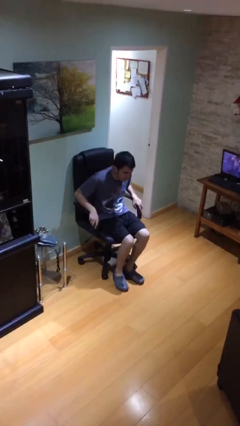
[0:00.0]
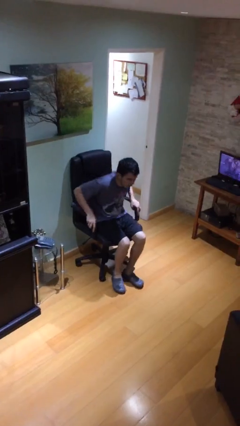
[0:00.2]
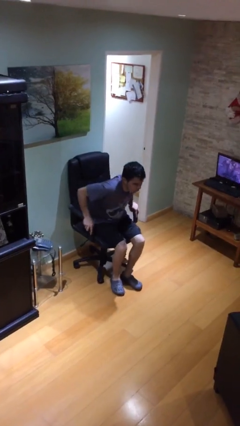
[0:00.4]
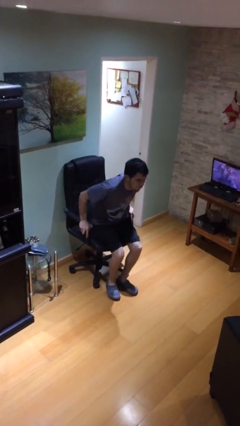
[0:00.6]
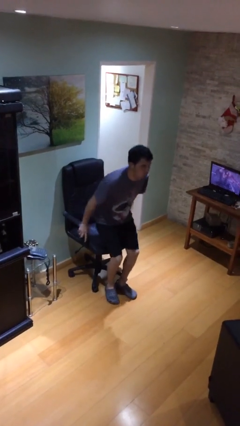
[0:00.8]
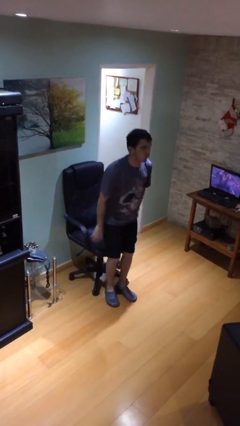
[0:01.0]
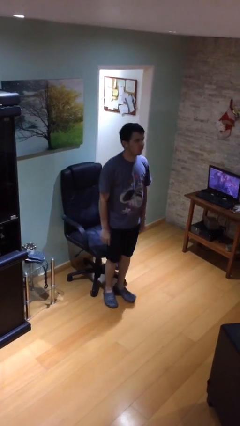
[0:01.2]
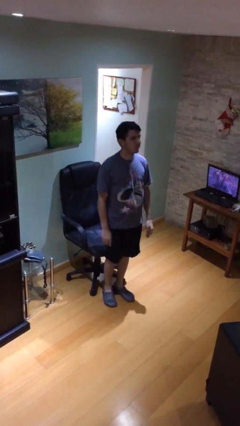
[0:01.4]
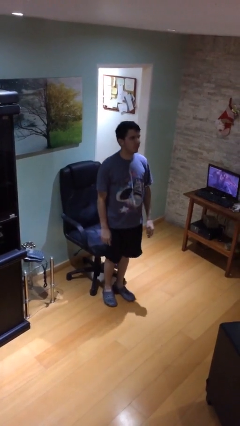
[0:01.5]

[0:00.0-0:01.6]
person stands up

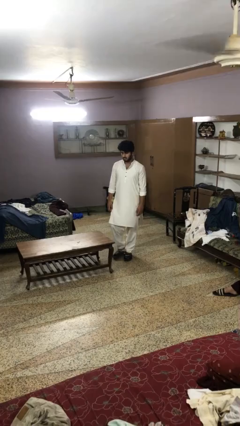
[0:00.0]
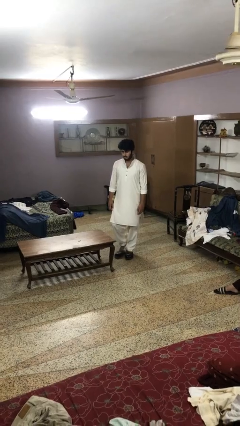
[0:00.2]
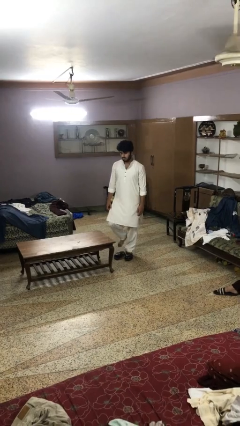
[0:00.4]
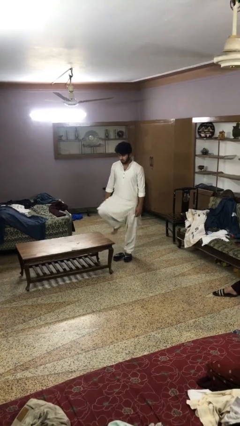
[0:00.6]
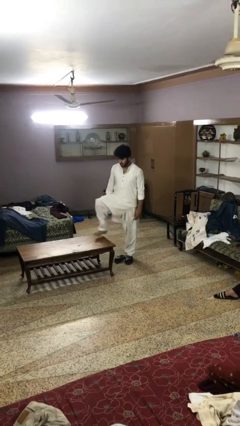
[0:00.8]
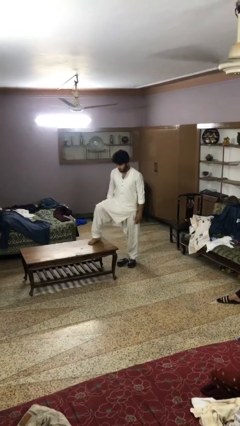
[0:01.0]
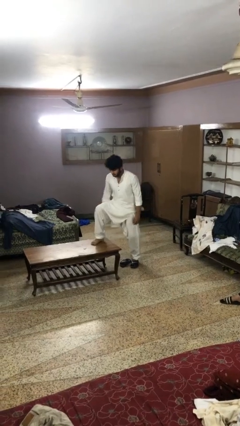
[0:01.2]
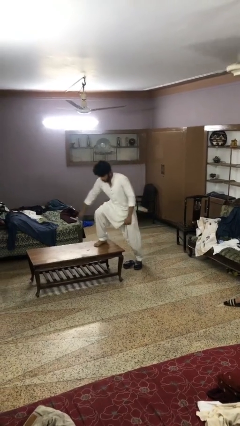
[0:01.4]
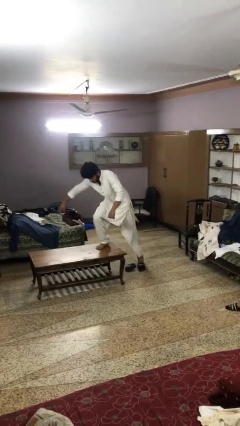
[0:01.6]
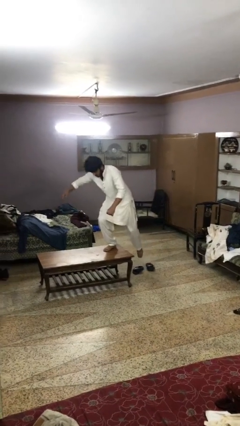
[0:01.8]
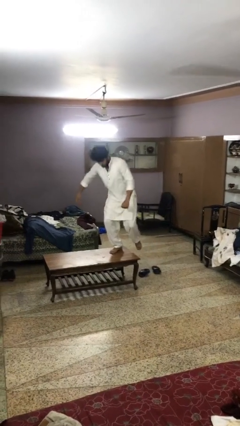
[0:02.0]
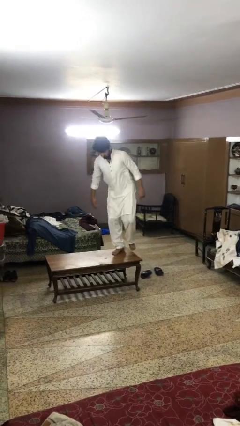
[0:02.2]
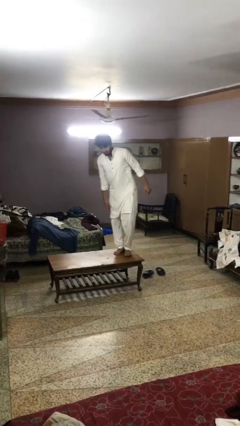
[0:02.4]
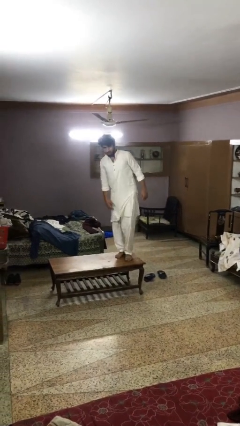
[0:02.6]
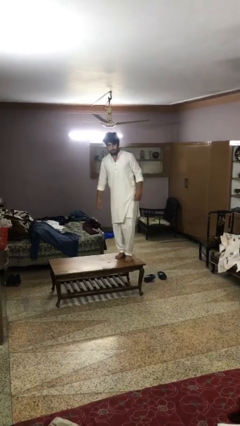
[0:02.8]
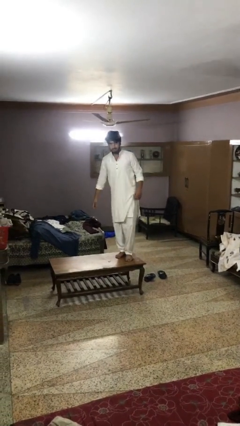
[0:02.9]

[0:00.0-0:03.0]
person climbs on table

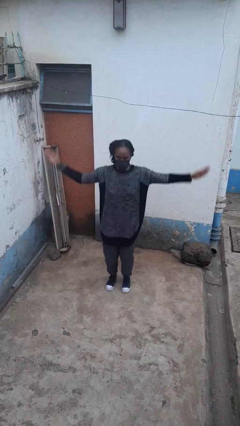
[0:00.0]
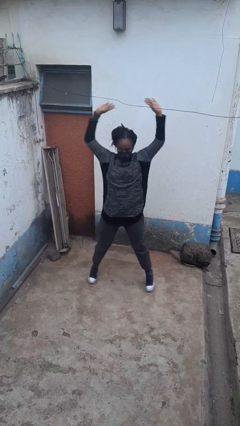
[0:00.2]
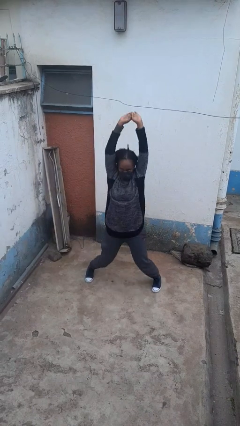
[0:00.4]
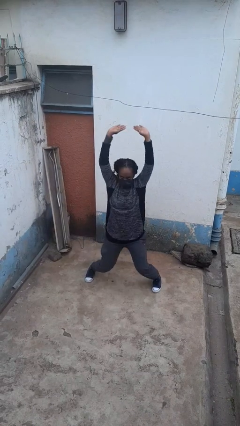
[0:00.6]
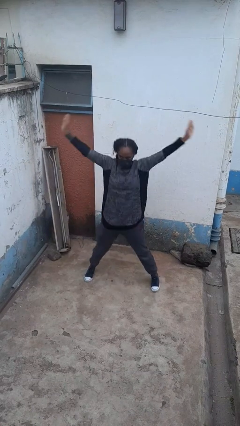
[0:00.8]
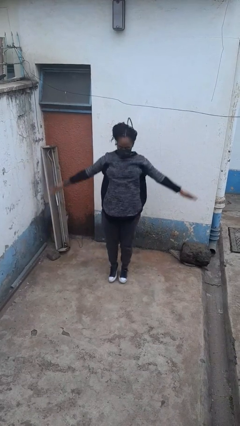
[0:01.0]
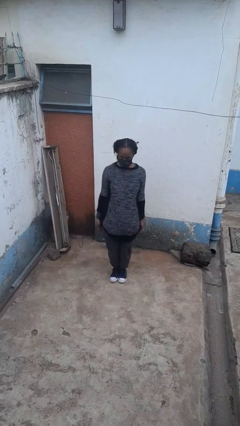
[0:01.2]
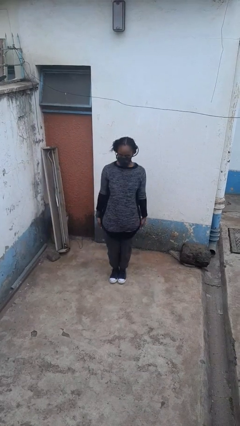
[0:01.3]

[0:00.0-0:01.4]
person exercises with jumping jacks

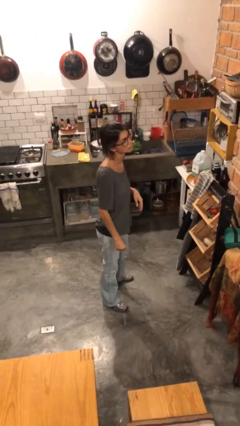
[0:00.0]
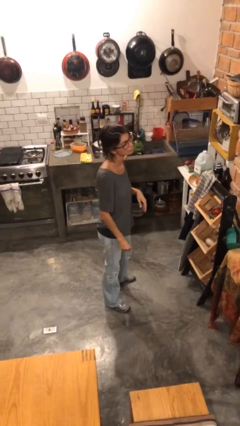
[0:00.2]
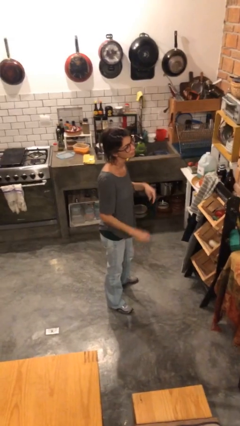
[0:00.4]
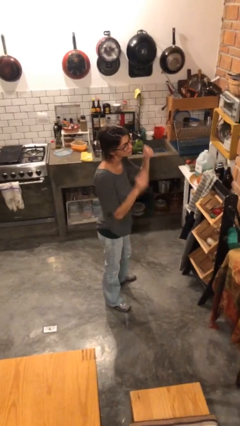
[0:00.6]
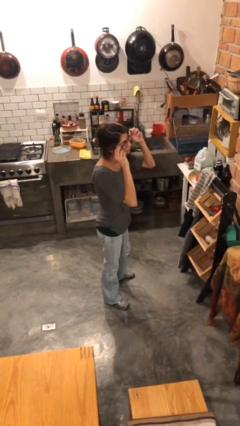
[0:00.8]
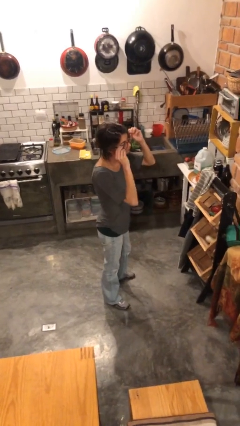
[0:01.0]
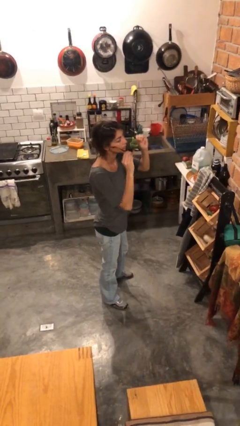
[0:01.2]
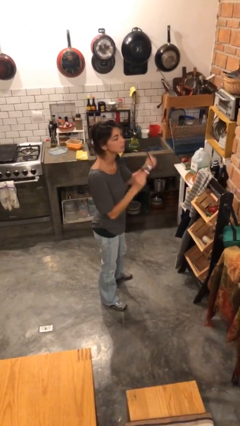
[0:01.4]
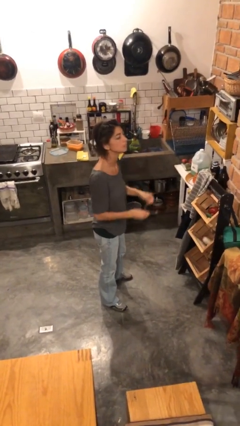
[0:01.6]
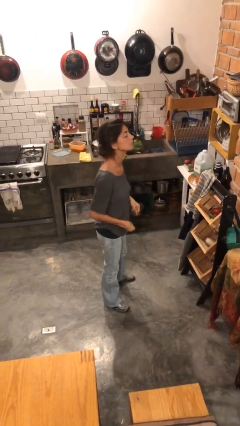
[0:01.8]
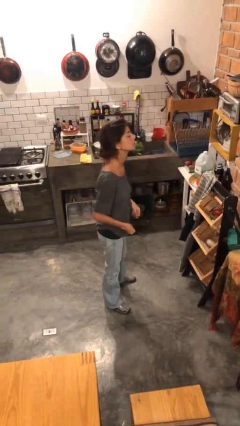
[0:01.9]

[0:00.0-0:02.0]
person takes off glasses

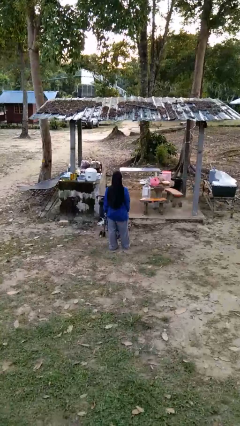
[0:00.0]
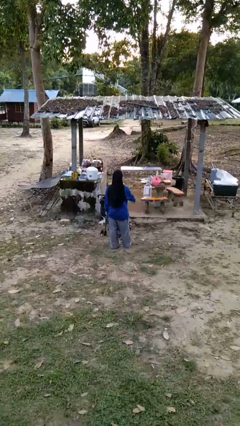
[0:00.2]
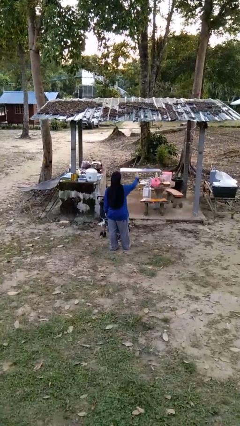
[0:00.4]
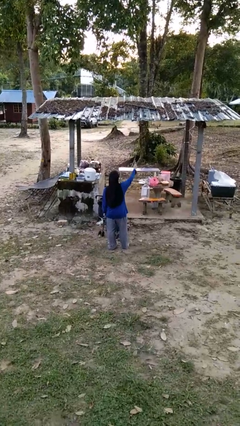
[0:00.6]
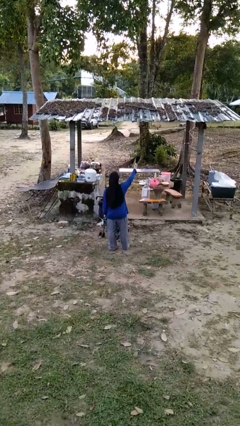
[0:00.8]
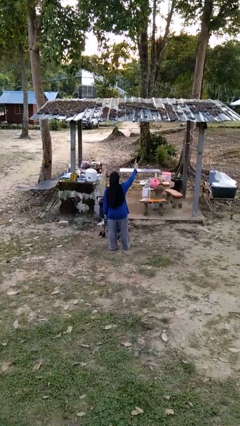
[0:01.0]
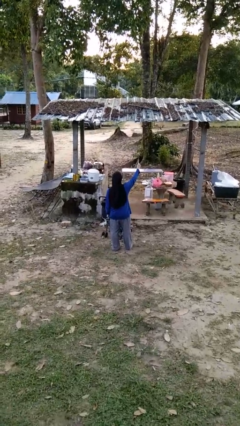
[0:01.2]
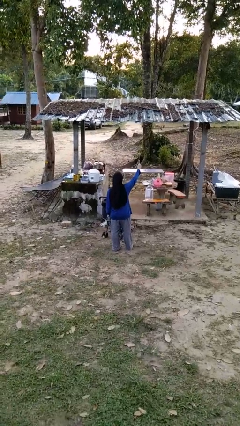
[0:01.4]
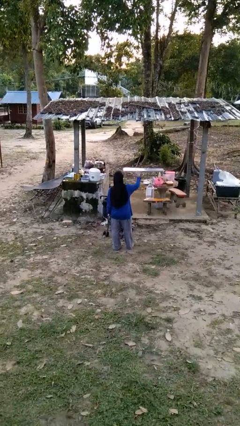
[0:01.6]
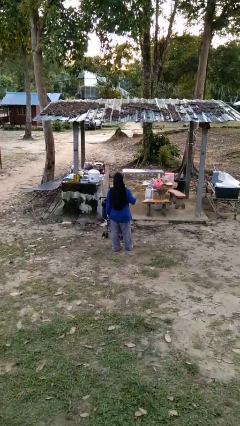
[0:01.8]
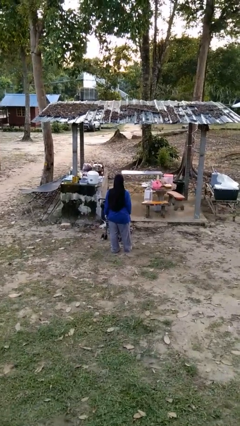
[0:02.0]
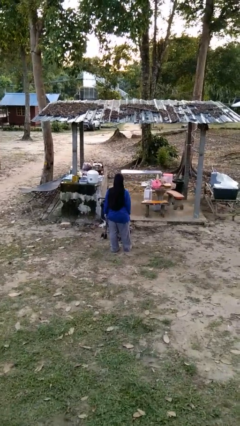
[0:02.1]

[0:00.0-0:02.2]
person gestures number one

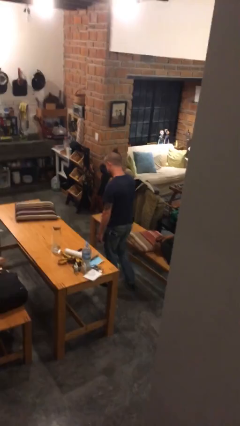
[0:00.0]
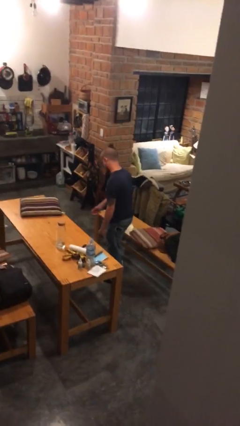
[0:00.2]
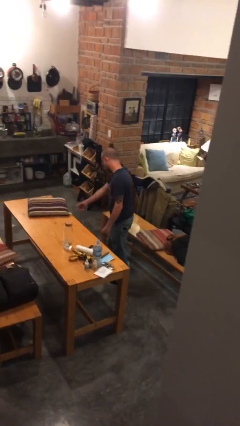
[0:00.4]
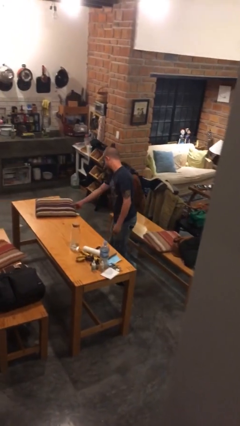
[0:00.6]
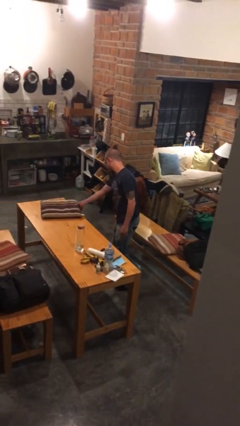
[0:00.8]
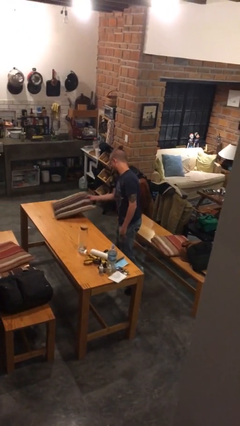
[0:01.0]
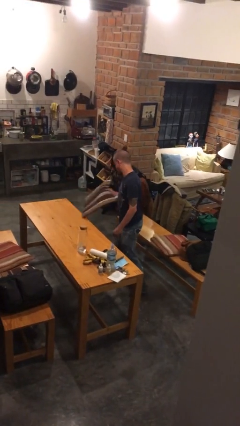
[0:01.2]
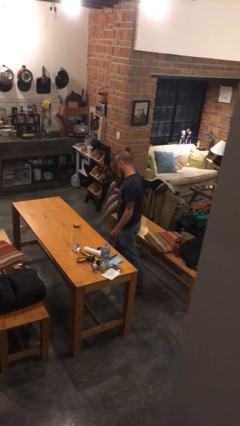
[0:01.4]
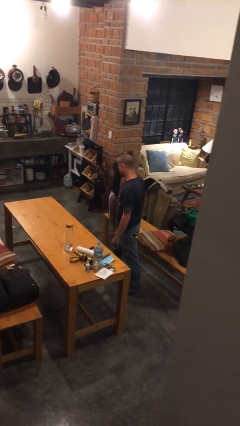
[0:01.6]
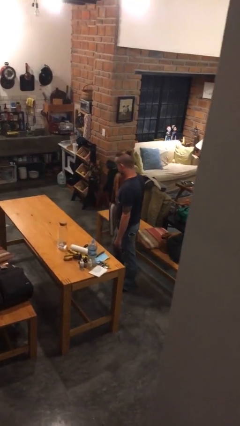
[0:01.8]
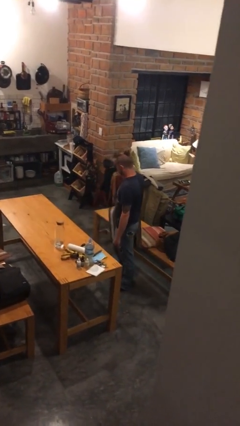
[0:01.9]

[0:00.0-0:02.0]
person picks up object from table

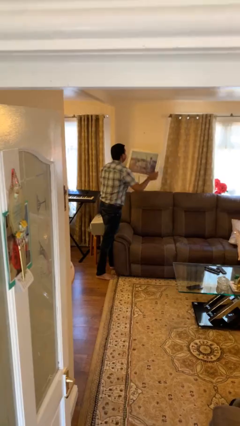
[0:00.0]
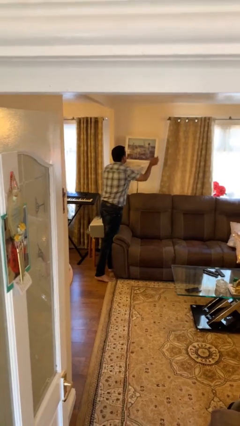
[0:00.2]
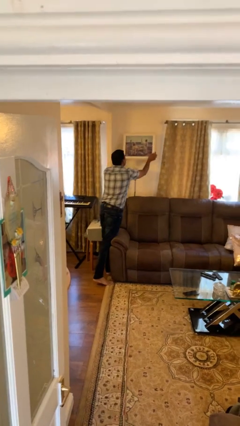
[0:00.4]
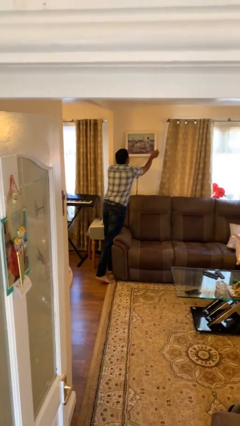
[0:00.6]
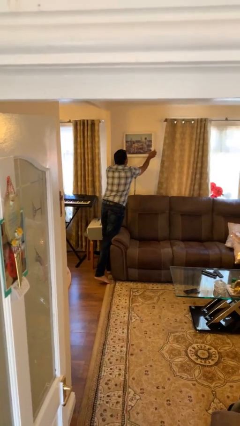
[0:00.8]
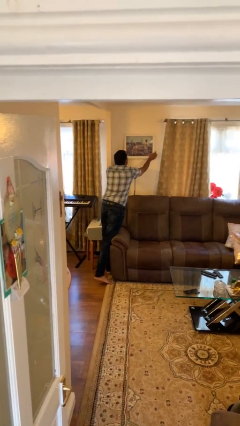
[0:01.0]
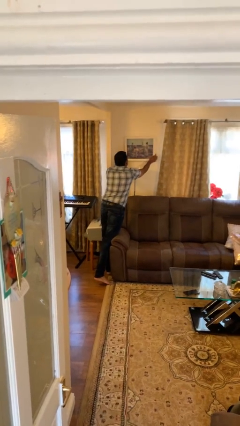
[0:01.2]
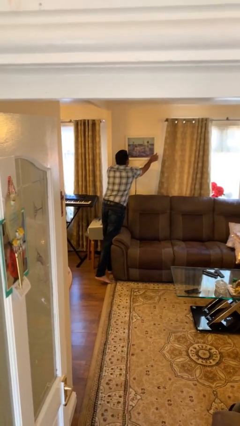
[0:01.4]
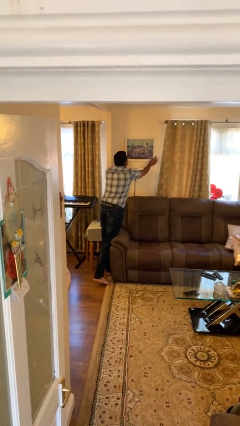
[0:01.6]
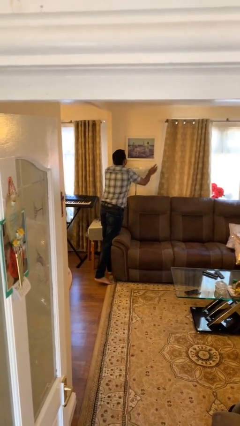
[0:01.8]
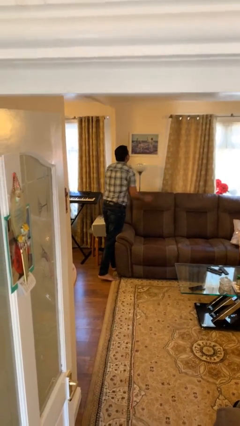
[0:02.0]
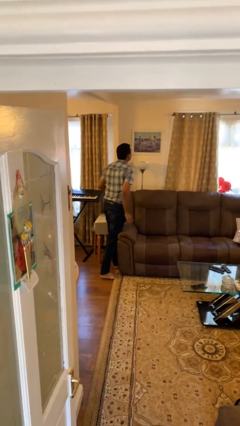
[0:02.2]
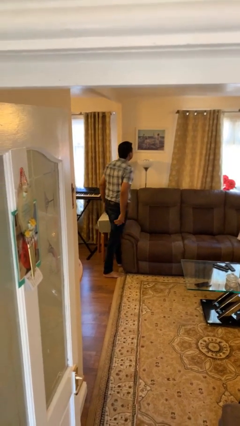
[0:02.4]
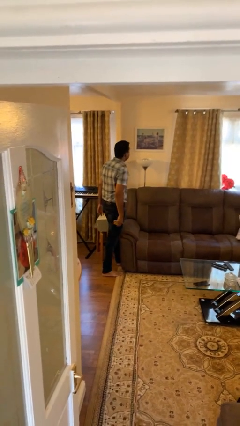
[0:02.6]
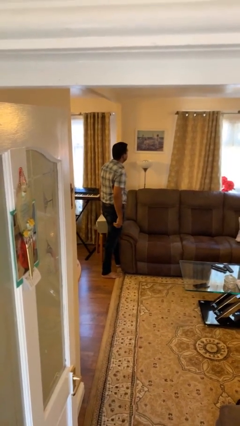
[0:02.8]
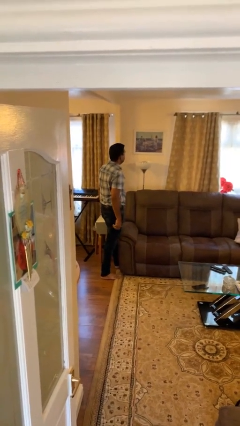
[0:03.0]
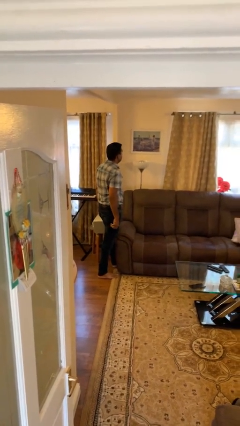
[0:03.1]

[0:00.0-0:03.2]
person puts up picture frame

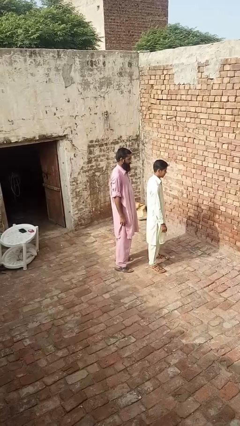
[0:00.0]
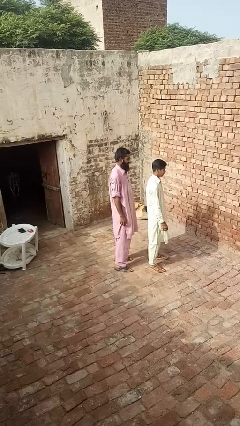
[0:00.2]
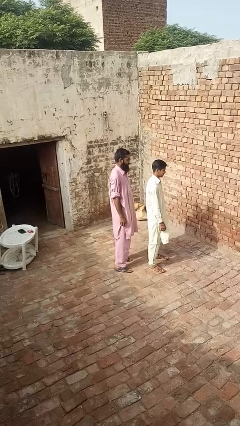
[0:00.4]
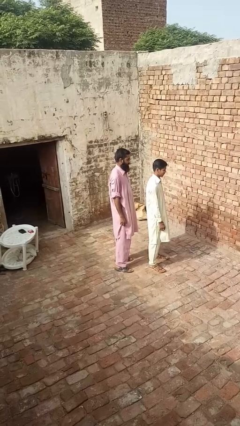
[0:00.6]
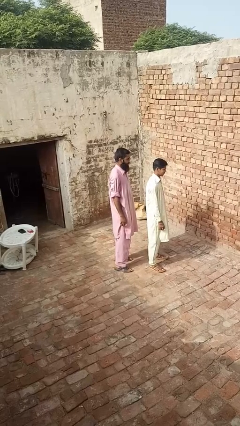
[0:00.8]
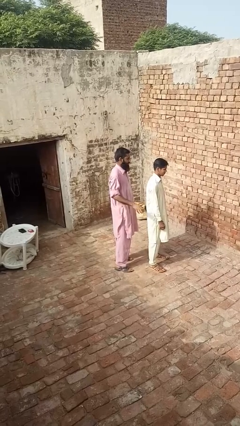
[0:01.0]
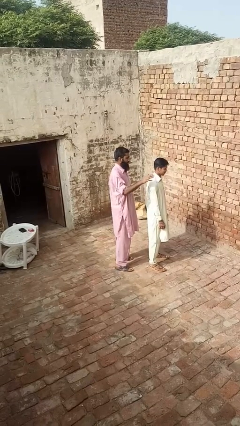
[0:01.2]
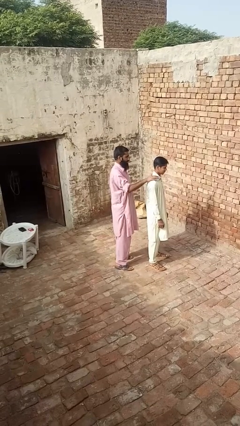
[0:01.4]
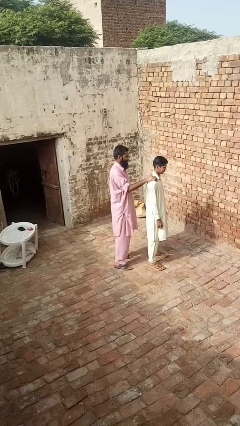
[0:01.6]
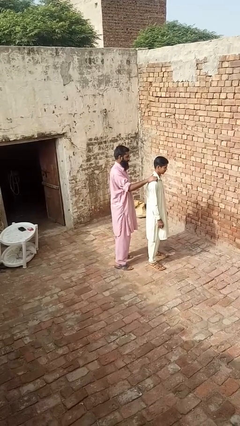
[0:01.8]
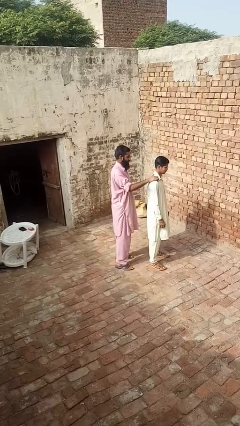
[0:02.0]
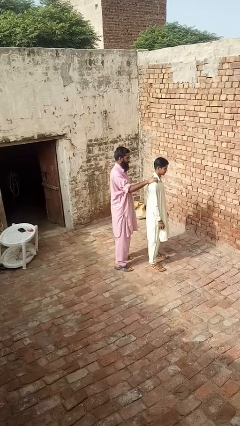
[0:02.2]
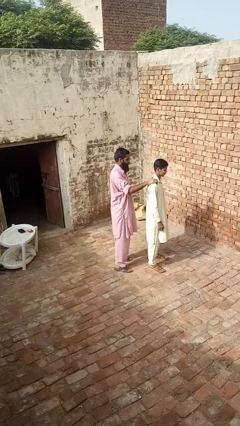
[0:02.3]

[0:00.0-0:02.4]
person grabs person by shoulder
